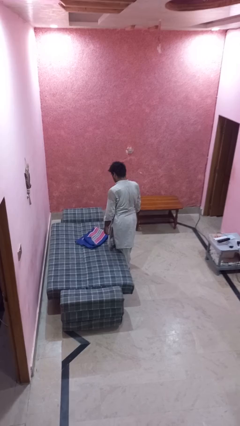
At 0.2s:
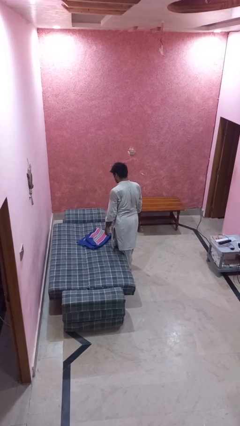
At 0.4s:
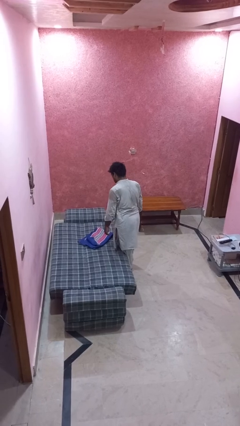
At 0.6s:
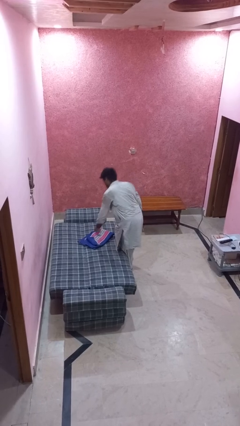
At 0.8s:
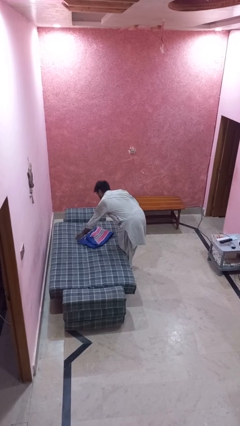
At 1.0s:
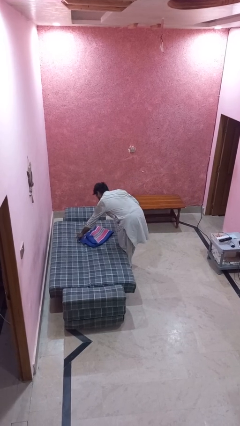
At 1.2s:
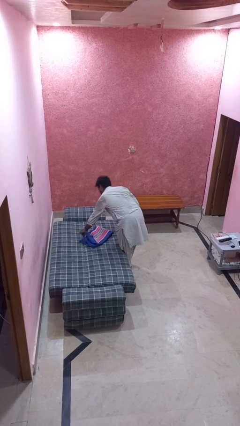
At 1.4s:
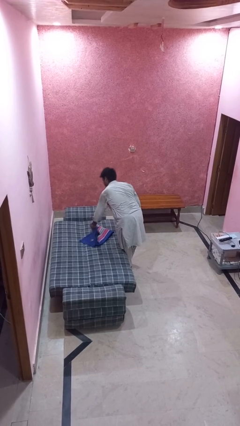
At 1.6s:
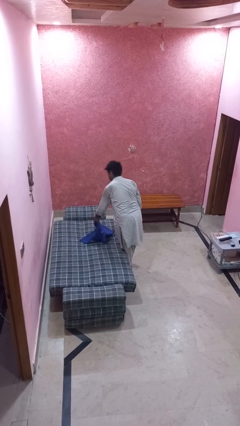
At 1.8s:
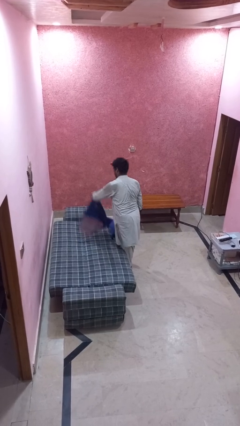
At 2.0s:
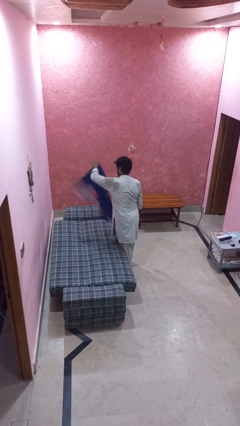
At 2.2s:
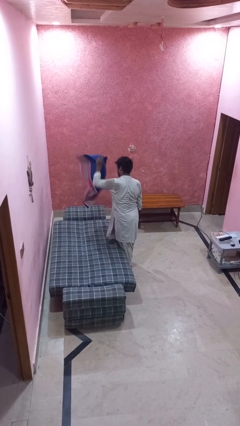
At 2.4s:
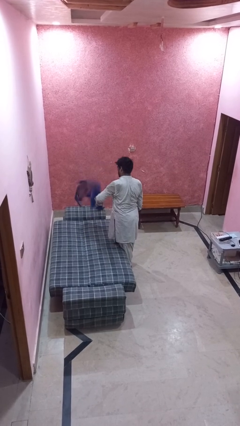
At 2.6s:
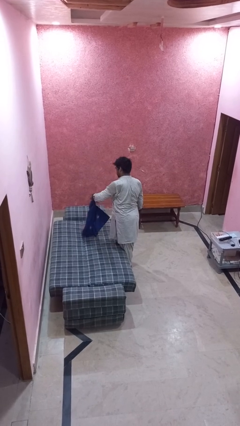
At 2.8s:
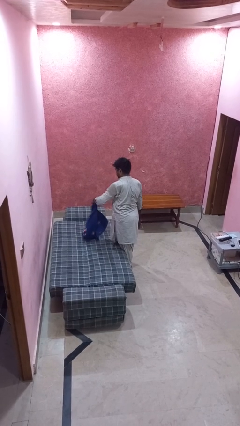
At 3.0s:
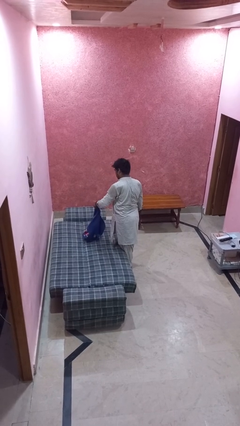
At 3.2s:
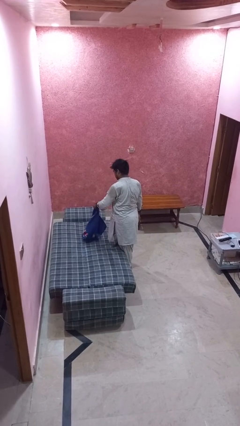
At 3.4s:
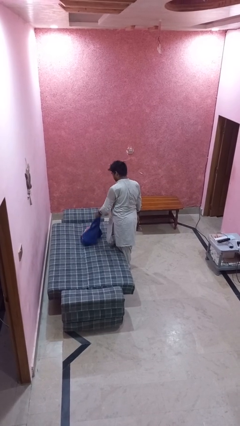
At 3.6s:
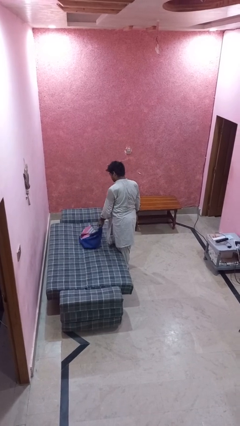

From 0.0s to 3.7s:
person unfolds blanket

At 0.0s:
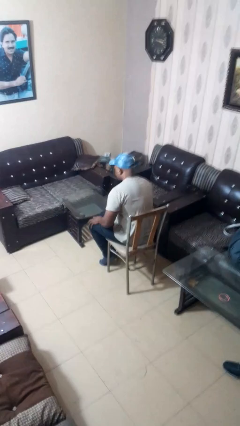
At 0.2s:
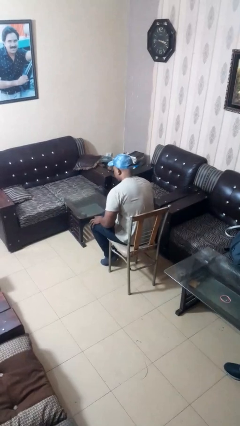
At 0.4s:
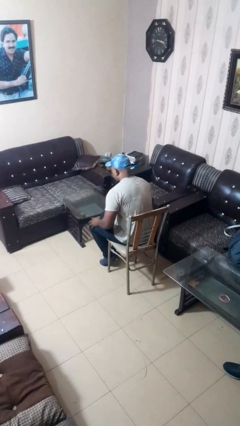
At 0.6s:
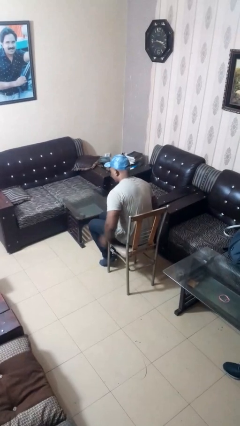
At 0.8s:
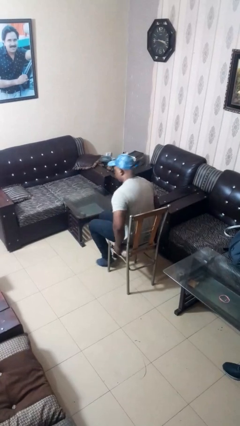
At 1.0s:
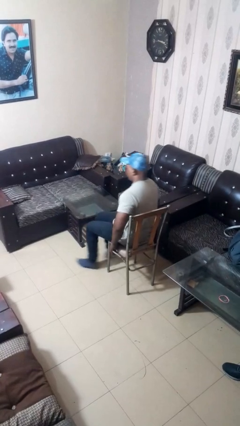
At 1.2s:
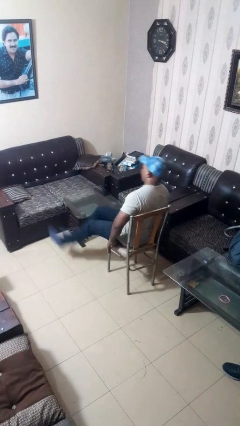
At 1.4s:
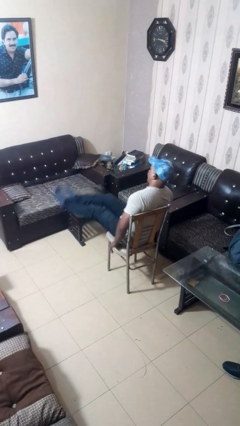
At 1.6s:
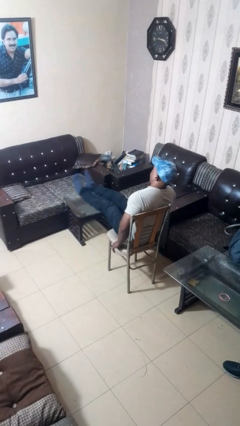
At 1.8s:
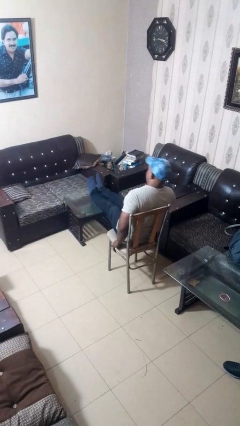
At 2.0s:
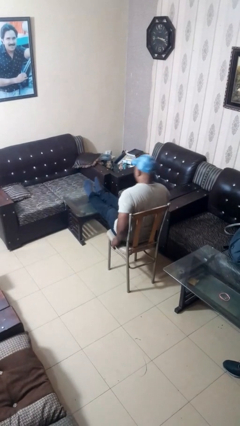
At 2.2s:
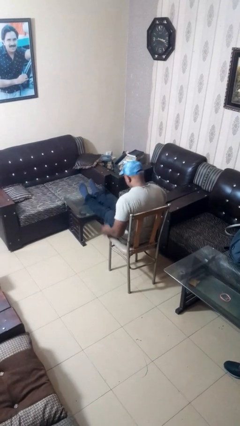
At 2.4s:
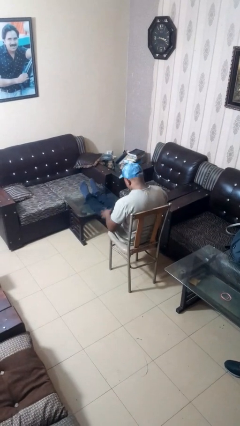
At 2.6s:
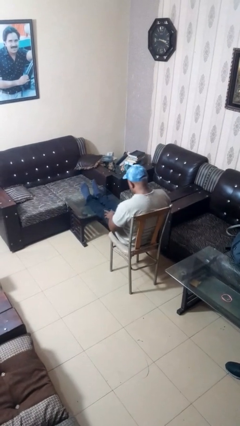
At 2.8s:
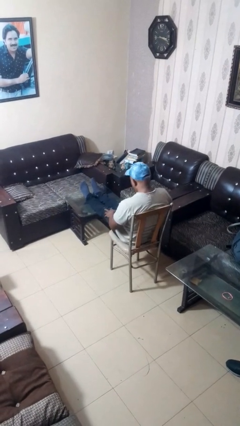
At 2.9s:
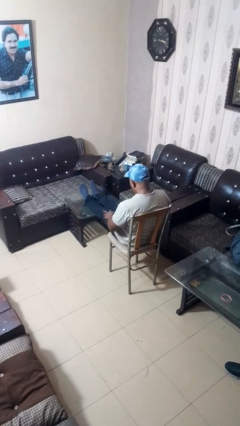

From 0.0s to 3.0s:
person puts feet up

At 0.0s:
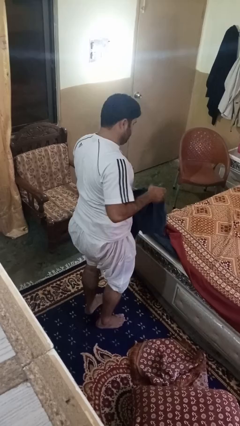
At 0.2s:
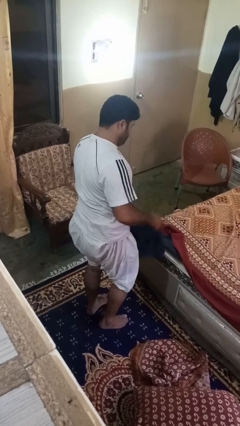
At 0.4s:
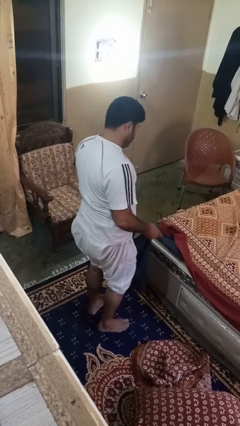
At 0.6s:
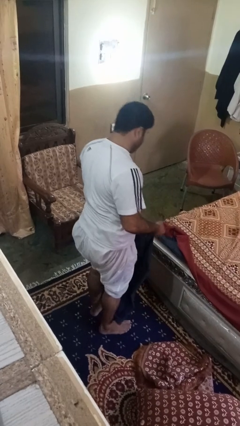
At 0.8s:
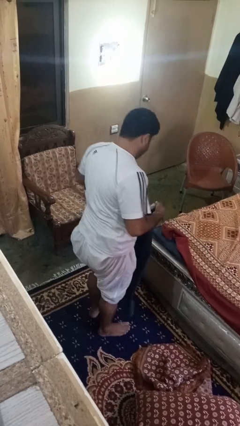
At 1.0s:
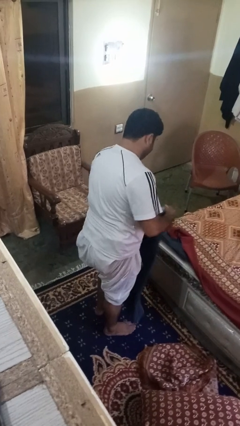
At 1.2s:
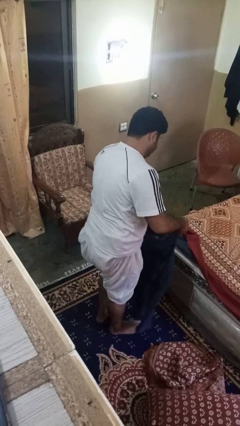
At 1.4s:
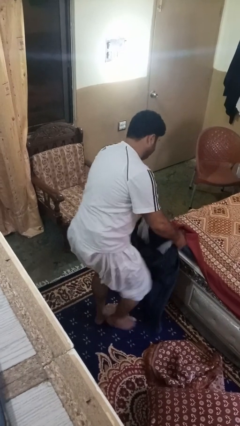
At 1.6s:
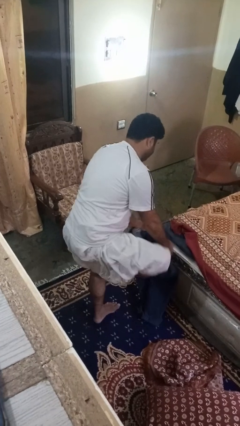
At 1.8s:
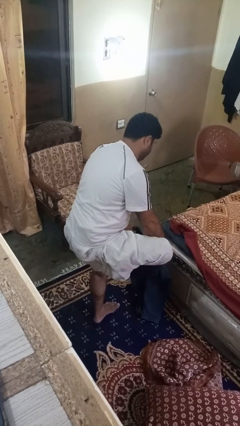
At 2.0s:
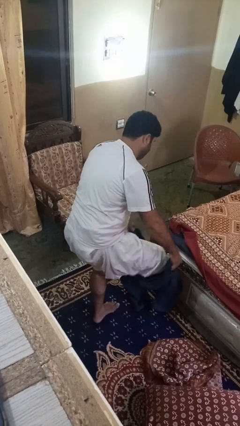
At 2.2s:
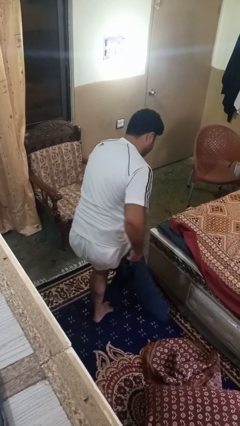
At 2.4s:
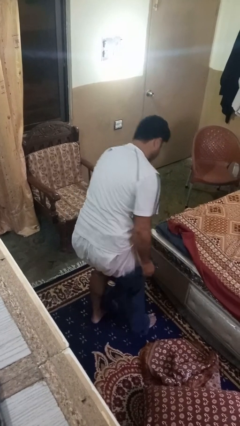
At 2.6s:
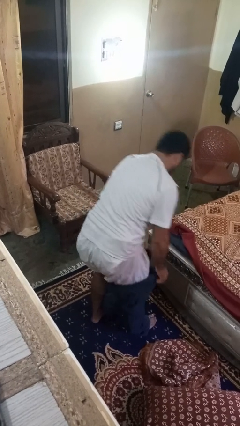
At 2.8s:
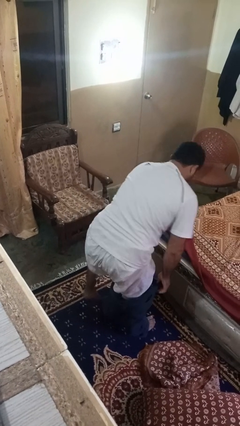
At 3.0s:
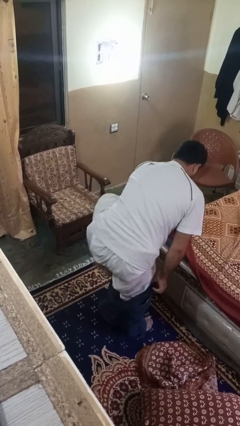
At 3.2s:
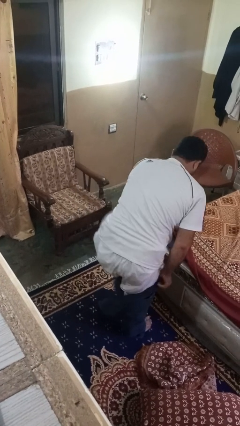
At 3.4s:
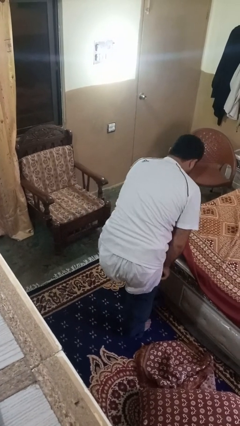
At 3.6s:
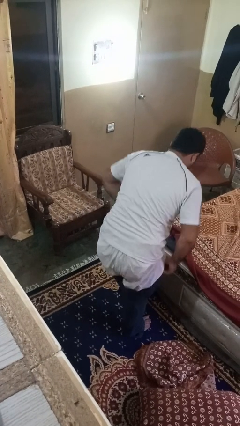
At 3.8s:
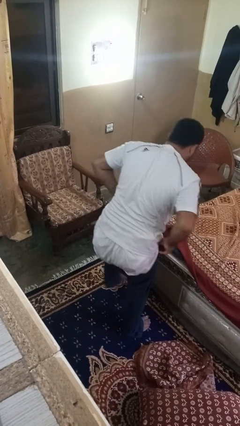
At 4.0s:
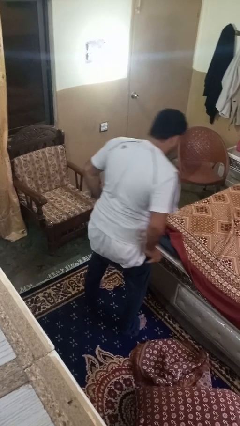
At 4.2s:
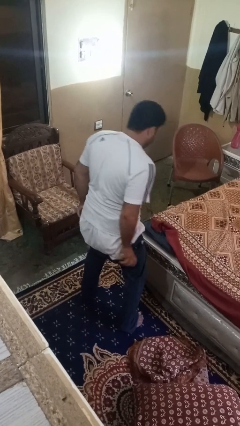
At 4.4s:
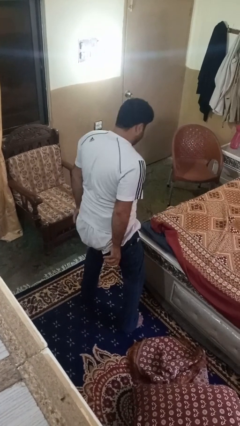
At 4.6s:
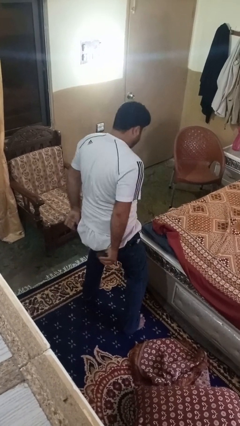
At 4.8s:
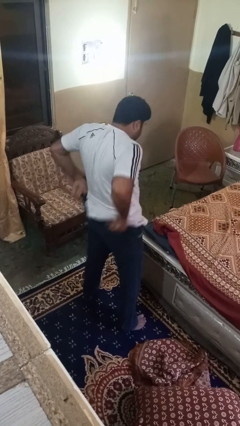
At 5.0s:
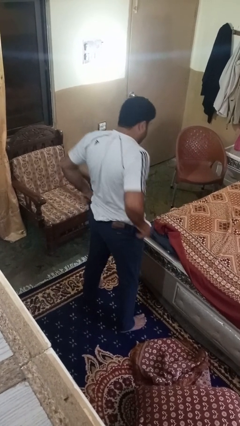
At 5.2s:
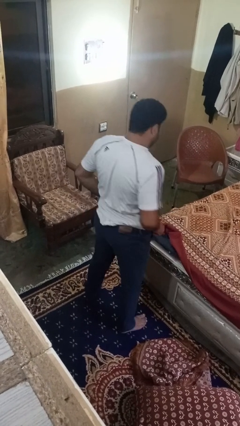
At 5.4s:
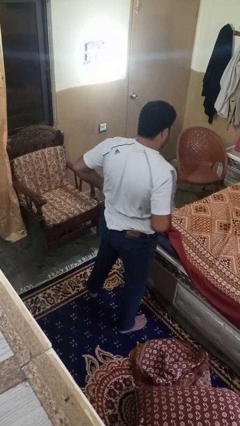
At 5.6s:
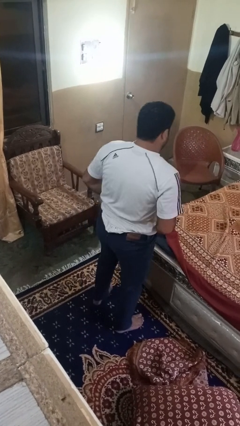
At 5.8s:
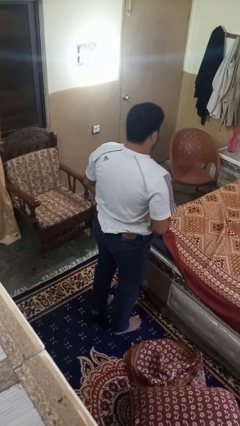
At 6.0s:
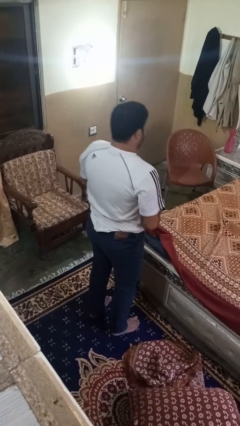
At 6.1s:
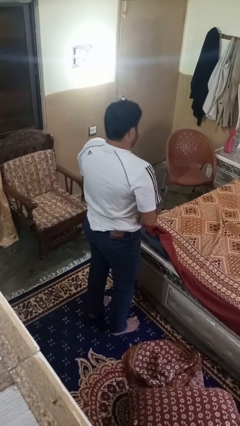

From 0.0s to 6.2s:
person puts on pants

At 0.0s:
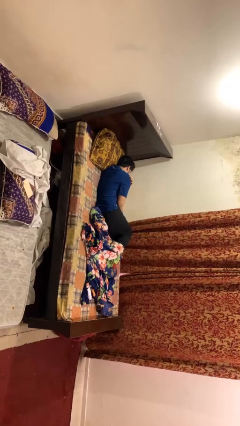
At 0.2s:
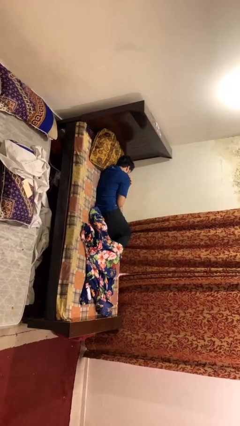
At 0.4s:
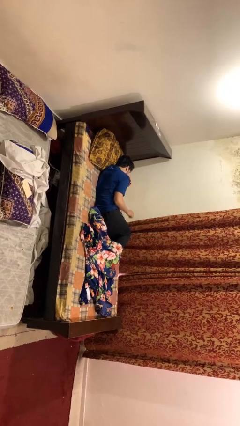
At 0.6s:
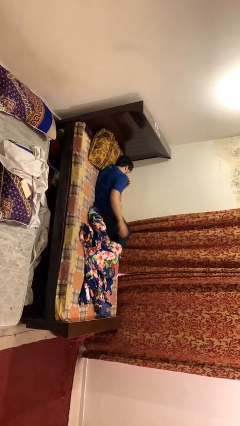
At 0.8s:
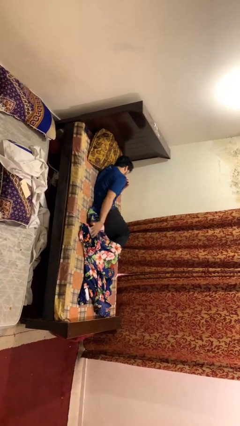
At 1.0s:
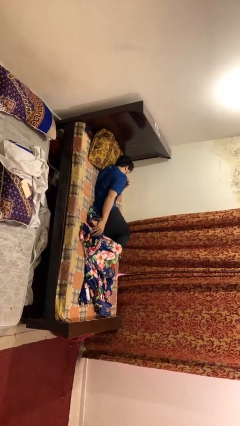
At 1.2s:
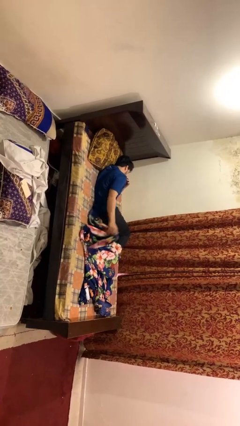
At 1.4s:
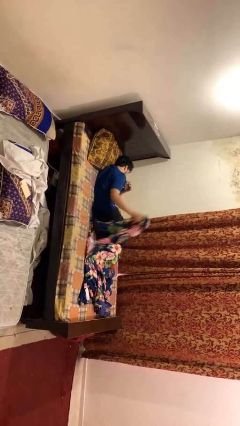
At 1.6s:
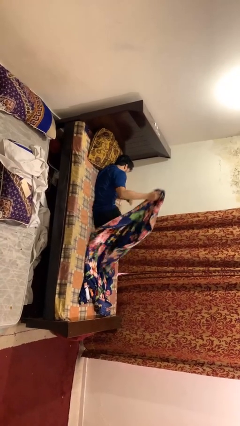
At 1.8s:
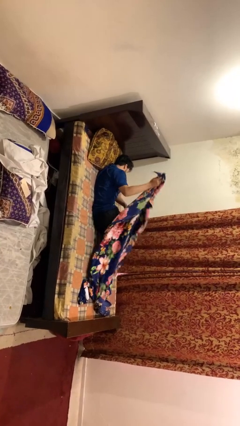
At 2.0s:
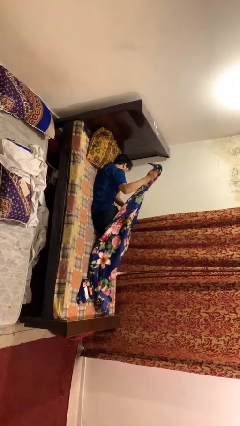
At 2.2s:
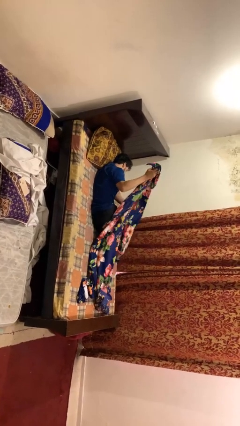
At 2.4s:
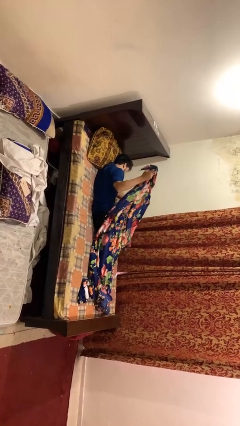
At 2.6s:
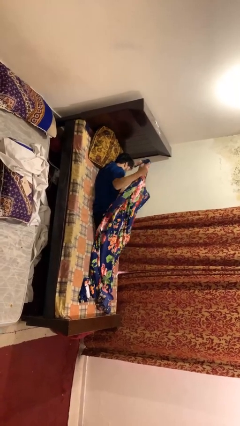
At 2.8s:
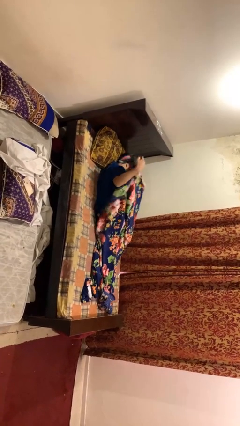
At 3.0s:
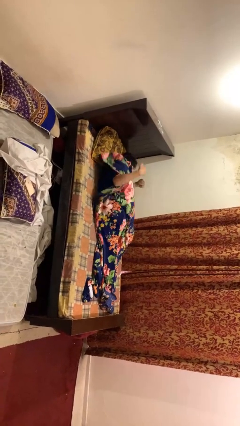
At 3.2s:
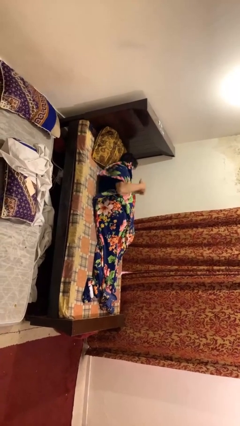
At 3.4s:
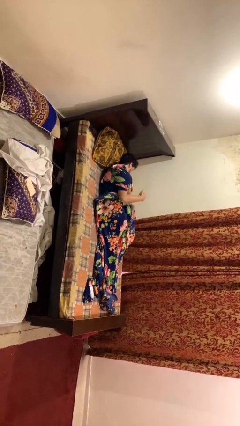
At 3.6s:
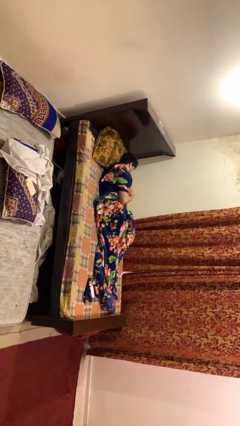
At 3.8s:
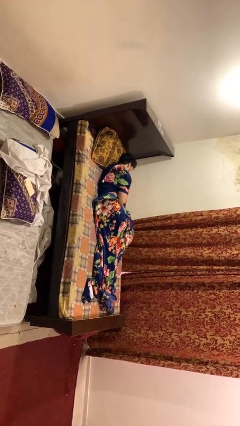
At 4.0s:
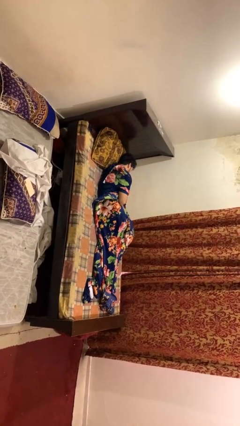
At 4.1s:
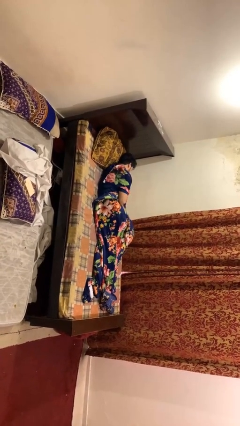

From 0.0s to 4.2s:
person covers with blanket

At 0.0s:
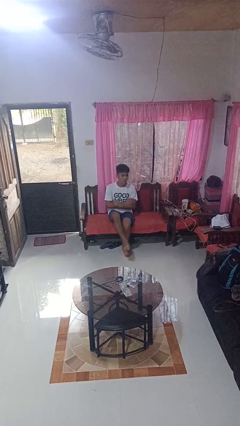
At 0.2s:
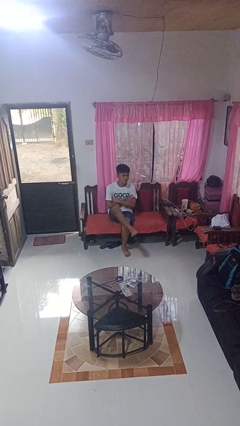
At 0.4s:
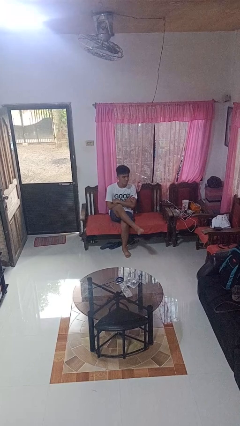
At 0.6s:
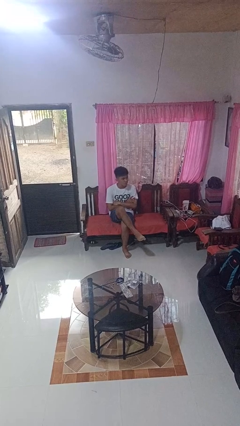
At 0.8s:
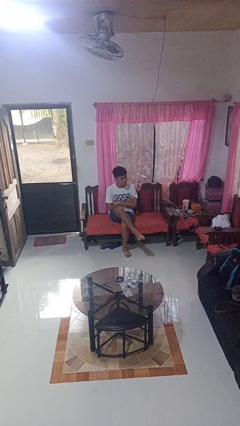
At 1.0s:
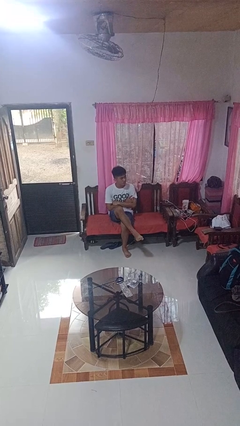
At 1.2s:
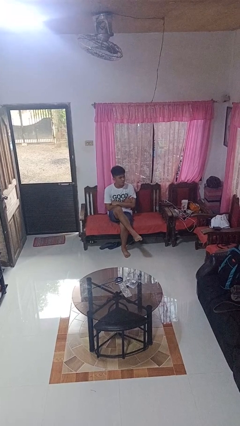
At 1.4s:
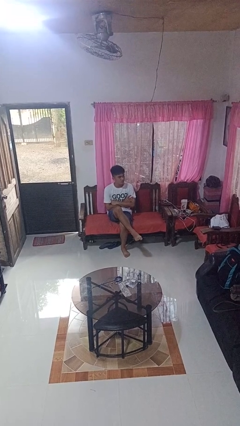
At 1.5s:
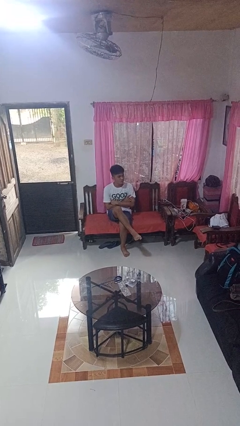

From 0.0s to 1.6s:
person crosses legs
